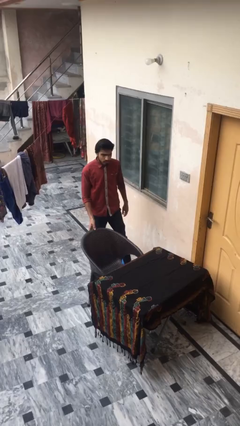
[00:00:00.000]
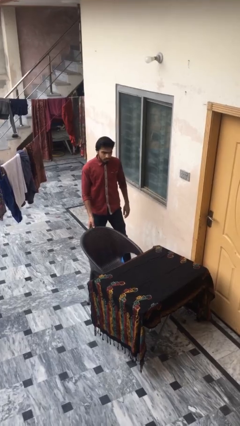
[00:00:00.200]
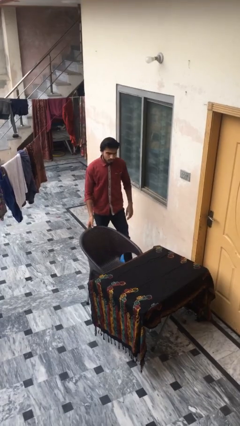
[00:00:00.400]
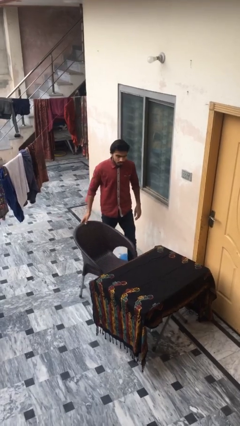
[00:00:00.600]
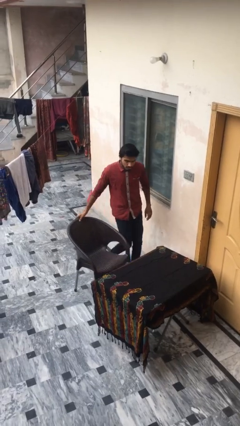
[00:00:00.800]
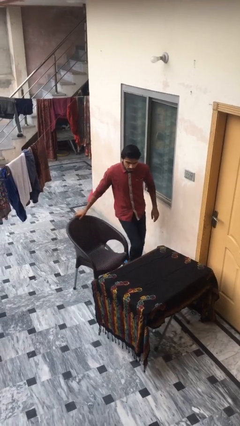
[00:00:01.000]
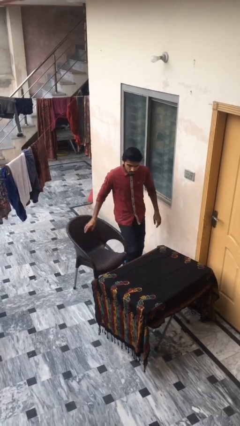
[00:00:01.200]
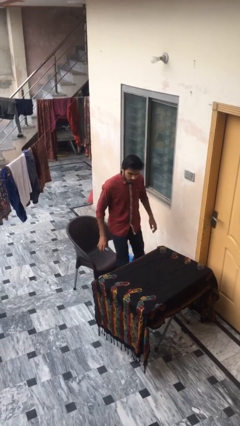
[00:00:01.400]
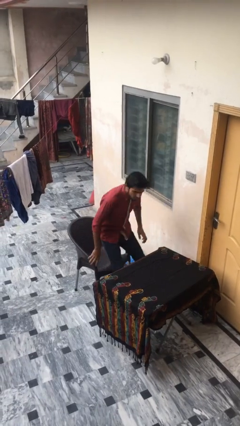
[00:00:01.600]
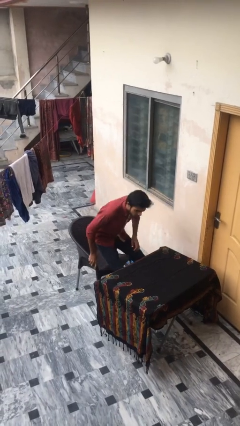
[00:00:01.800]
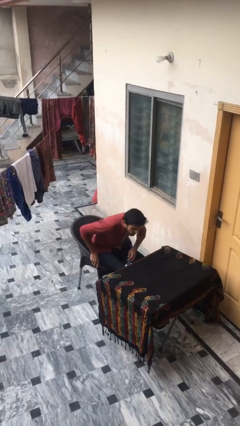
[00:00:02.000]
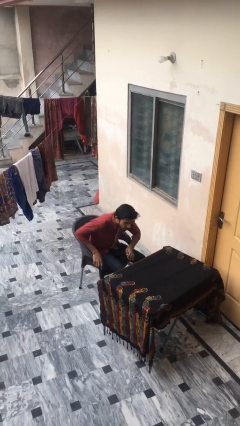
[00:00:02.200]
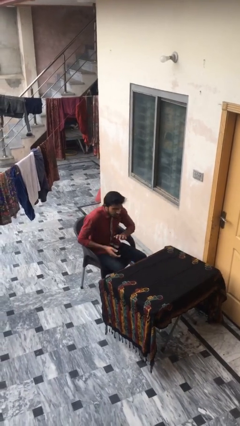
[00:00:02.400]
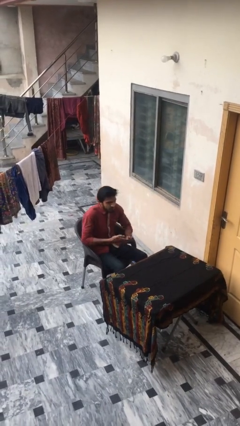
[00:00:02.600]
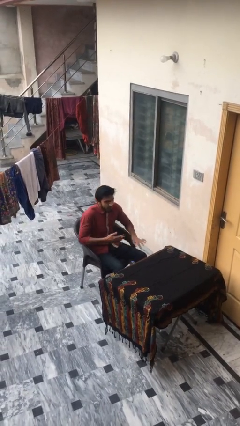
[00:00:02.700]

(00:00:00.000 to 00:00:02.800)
person sits down

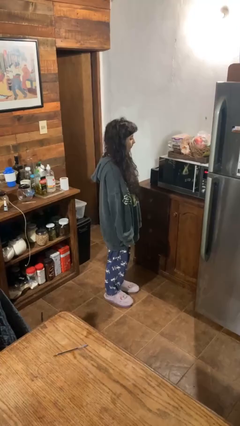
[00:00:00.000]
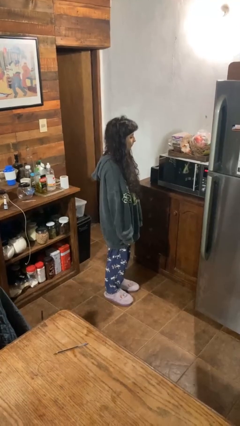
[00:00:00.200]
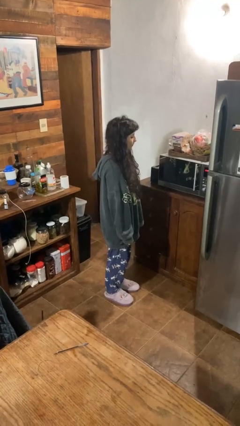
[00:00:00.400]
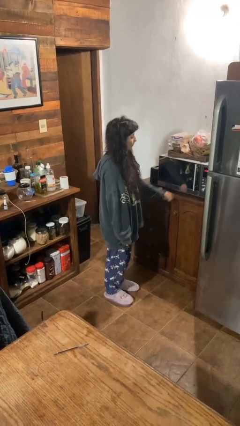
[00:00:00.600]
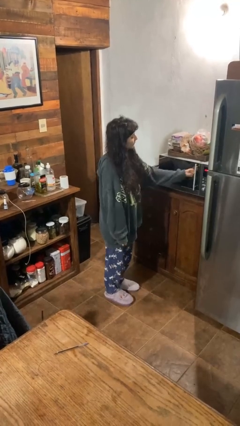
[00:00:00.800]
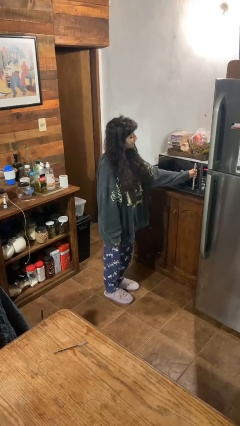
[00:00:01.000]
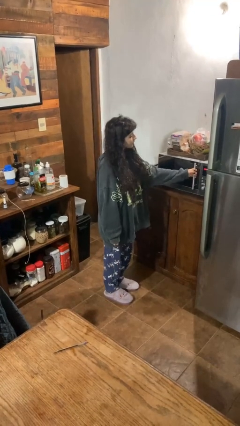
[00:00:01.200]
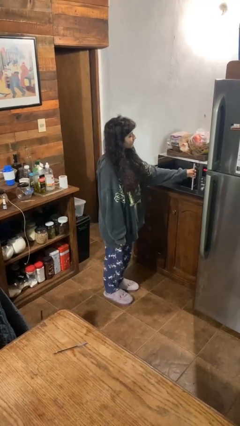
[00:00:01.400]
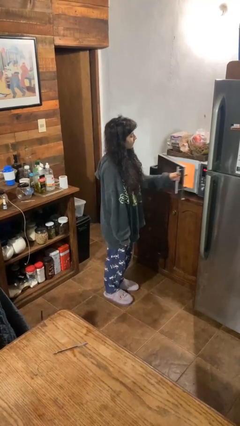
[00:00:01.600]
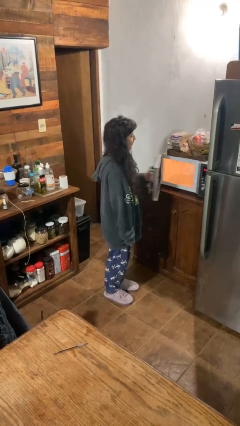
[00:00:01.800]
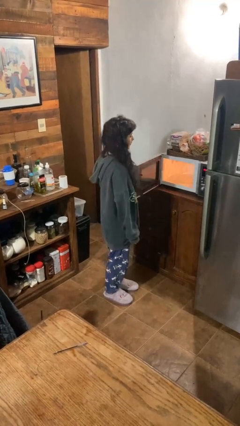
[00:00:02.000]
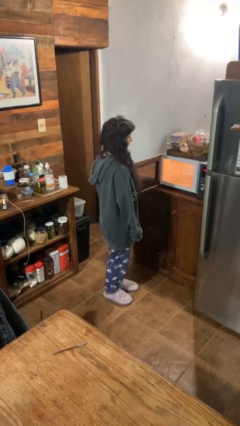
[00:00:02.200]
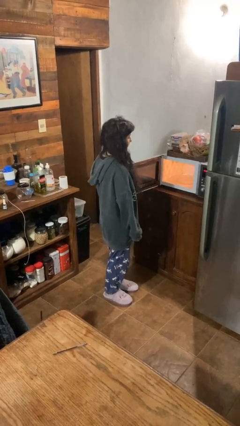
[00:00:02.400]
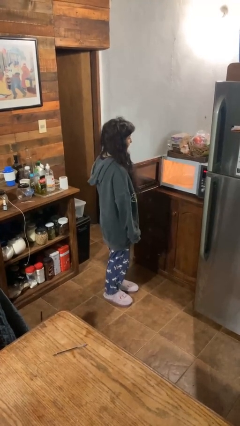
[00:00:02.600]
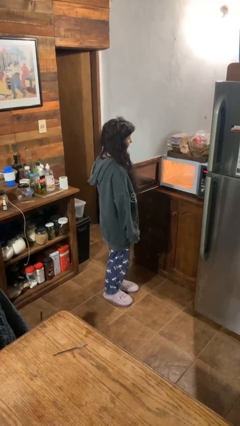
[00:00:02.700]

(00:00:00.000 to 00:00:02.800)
person opens microwave

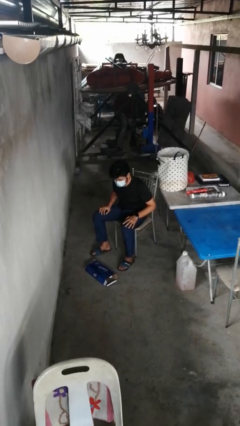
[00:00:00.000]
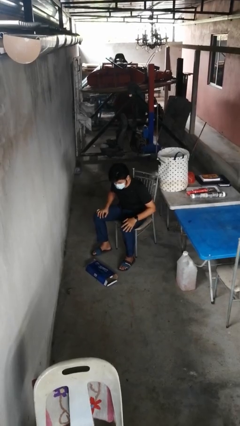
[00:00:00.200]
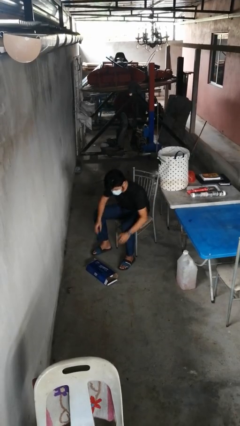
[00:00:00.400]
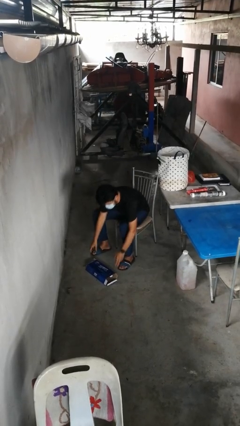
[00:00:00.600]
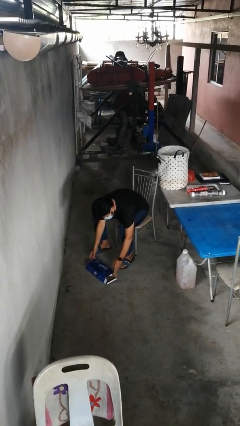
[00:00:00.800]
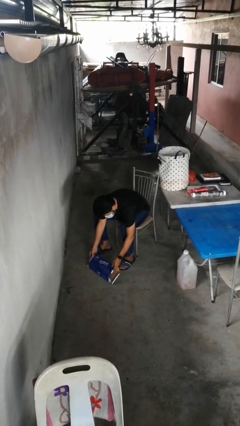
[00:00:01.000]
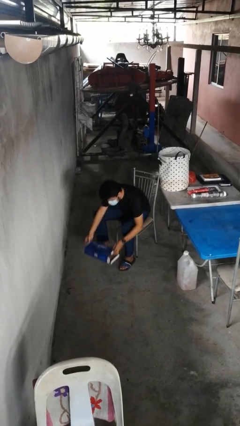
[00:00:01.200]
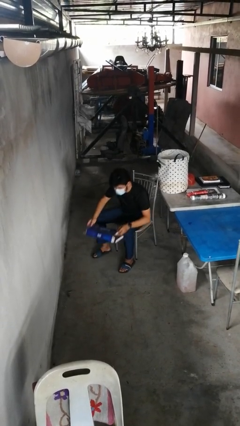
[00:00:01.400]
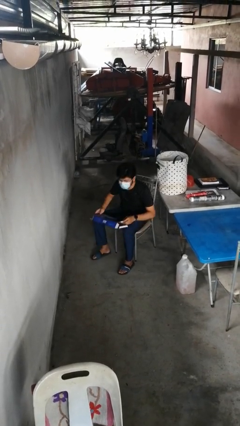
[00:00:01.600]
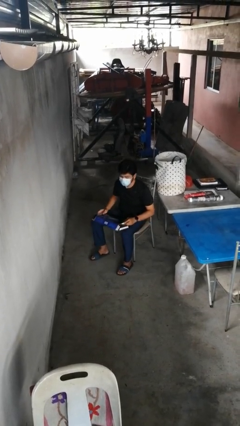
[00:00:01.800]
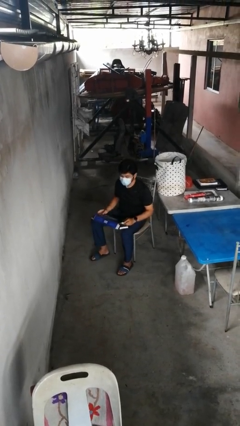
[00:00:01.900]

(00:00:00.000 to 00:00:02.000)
person picks up object from floor

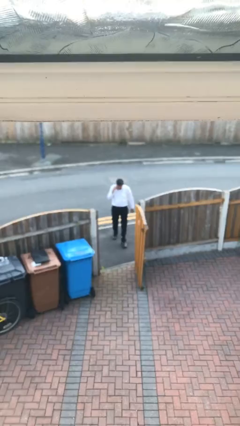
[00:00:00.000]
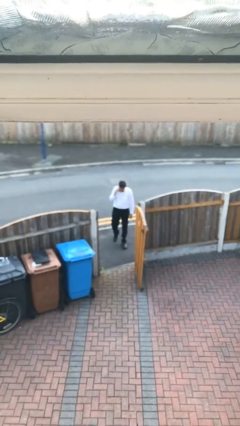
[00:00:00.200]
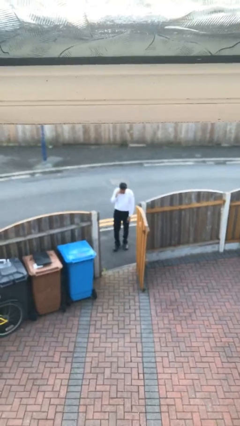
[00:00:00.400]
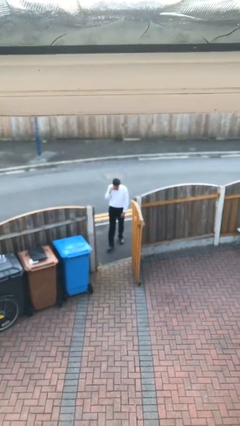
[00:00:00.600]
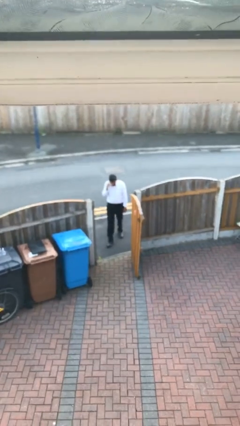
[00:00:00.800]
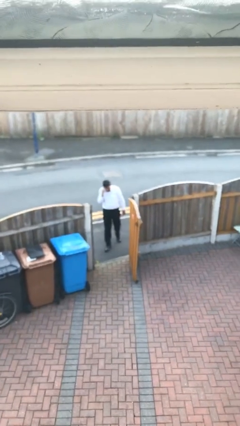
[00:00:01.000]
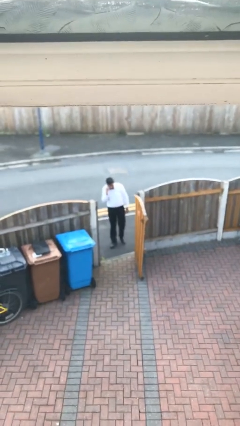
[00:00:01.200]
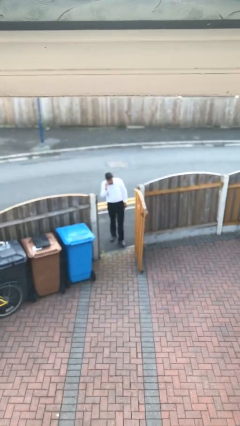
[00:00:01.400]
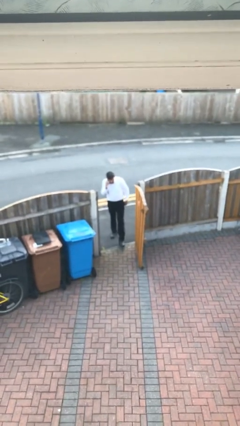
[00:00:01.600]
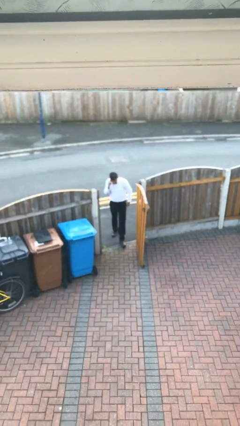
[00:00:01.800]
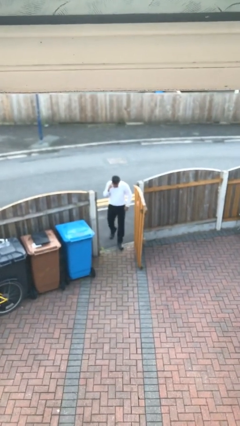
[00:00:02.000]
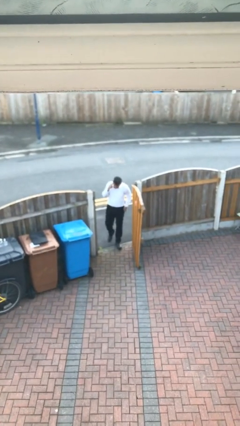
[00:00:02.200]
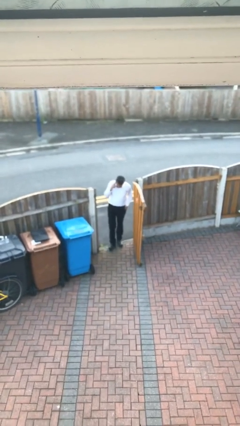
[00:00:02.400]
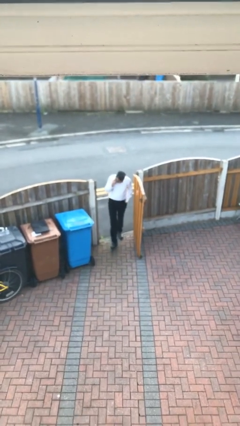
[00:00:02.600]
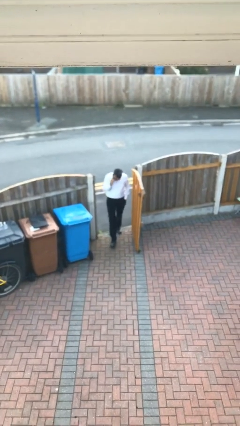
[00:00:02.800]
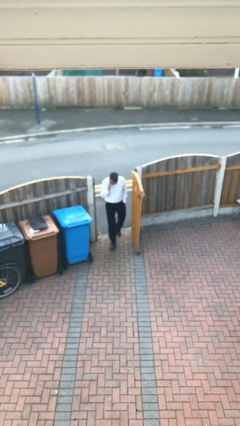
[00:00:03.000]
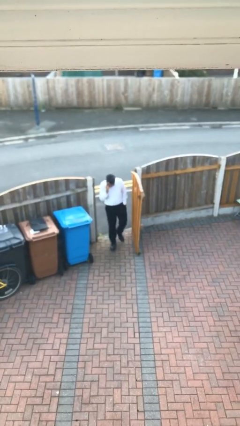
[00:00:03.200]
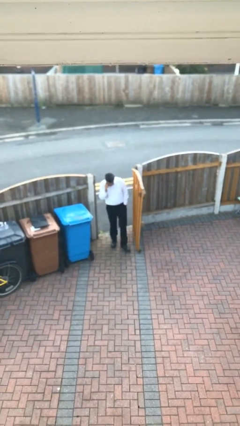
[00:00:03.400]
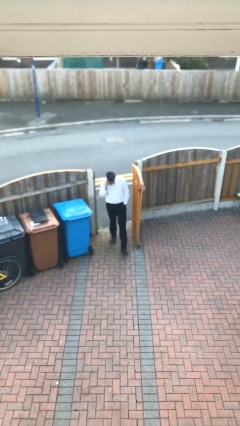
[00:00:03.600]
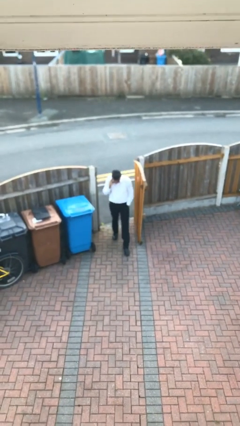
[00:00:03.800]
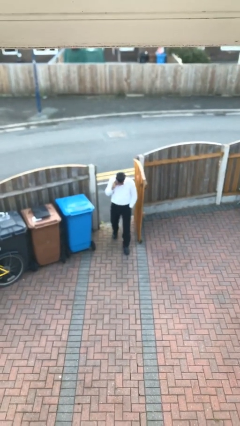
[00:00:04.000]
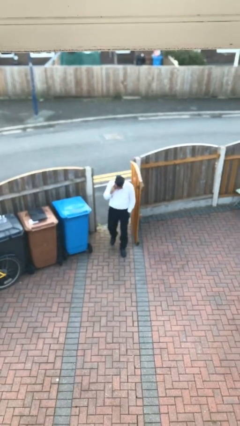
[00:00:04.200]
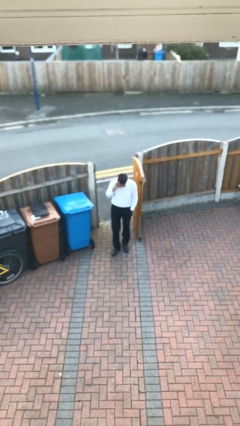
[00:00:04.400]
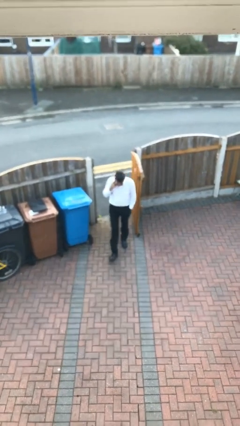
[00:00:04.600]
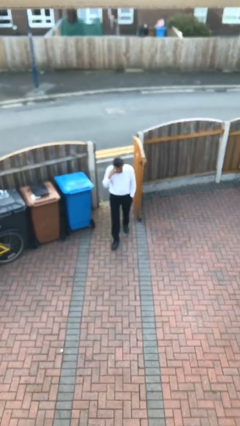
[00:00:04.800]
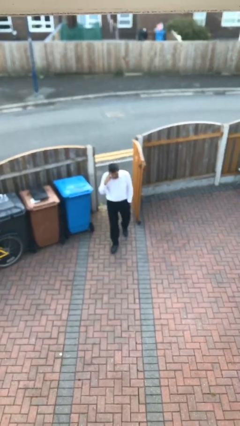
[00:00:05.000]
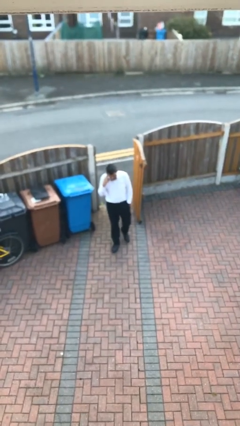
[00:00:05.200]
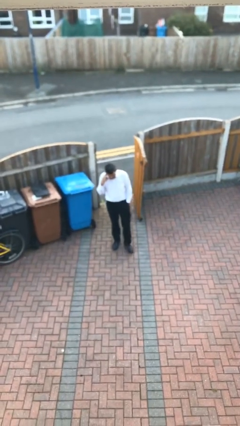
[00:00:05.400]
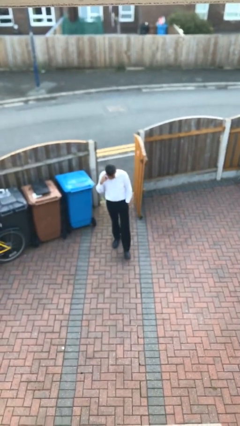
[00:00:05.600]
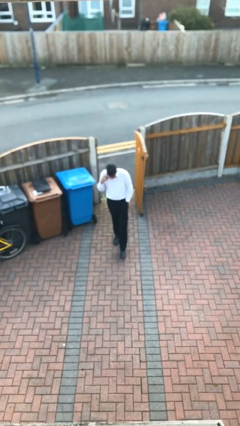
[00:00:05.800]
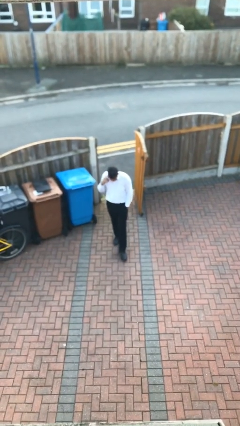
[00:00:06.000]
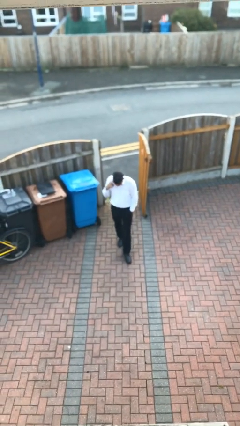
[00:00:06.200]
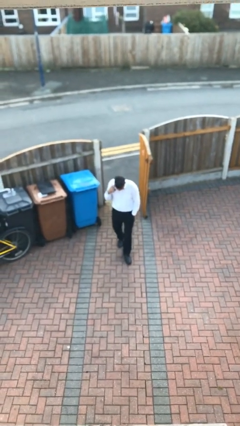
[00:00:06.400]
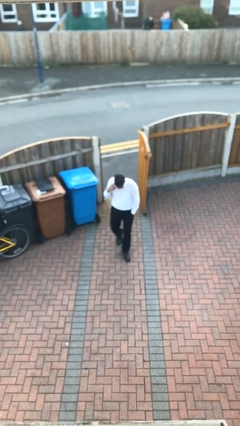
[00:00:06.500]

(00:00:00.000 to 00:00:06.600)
person enters scene through structure

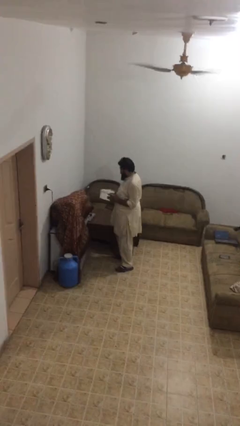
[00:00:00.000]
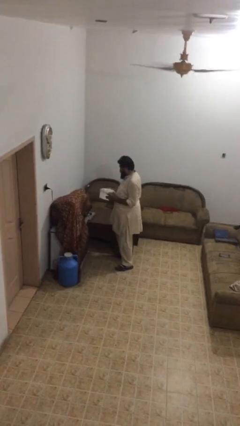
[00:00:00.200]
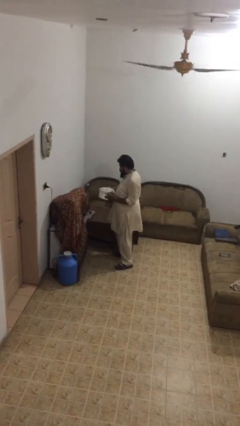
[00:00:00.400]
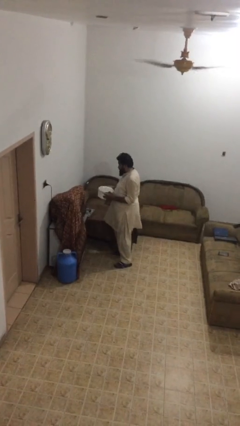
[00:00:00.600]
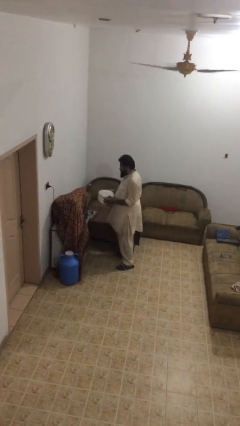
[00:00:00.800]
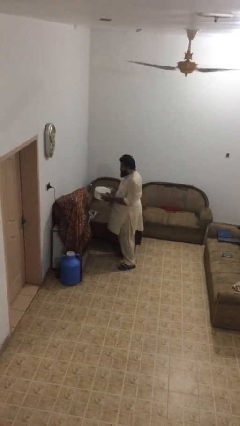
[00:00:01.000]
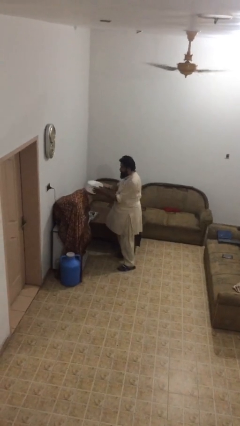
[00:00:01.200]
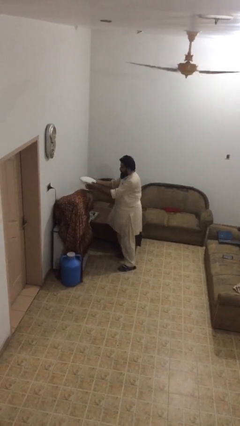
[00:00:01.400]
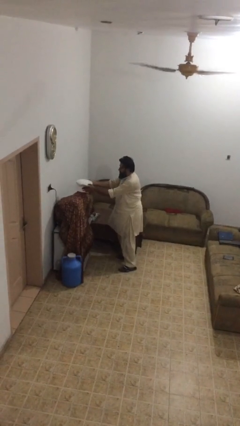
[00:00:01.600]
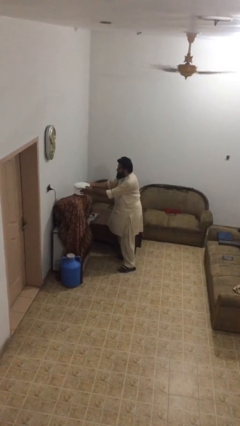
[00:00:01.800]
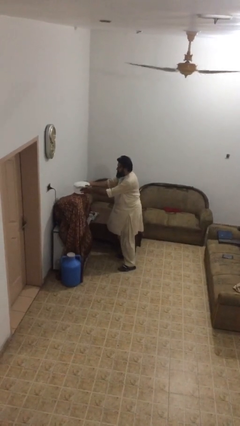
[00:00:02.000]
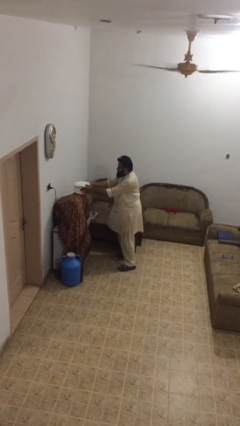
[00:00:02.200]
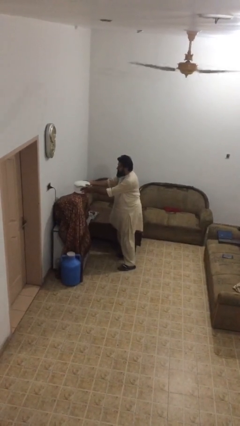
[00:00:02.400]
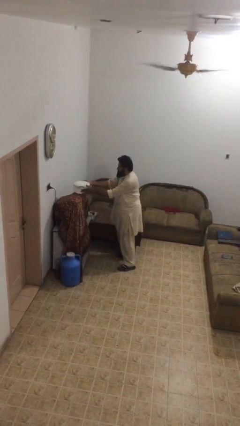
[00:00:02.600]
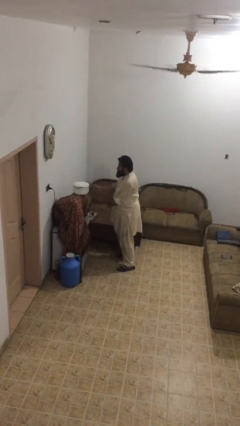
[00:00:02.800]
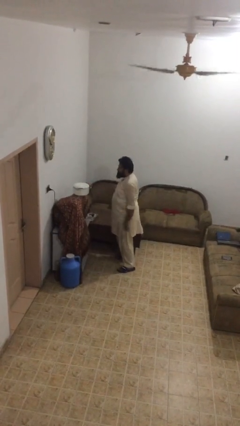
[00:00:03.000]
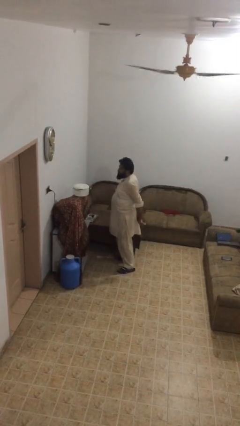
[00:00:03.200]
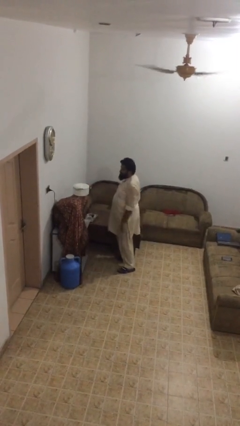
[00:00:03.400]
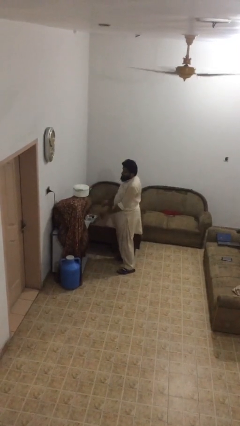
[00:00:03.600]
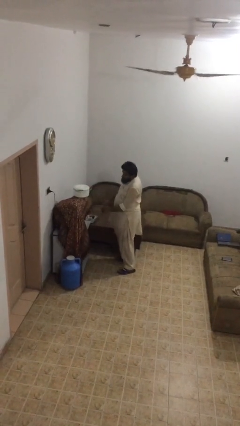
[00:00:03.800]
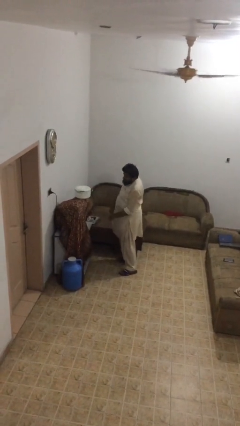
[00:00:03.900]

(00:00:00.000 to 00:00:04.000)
person puts down object on shelf
